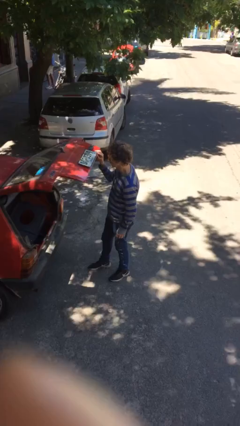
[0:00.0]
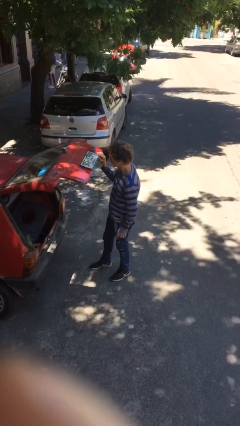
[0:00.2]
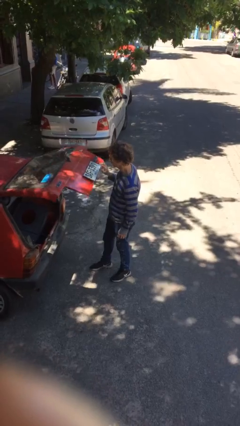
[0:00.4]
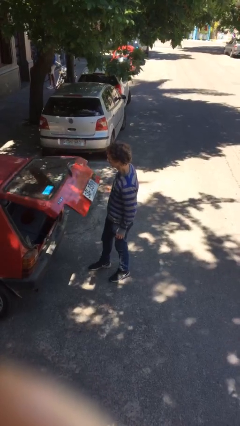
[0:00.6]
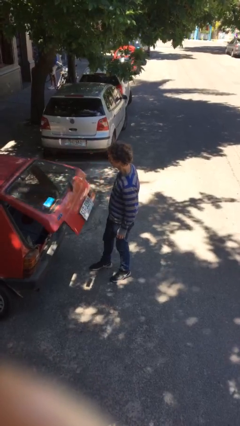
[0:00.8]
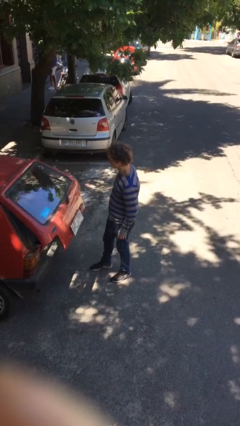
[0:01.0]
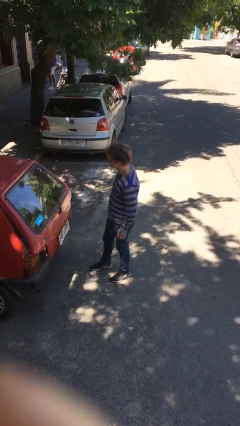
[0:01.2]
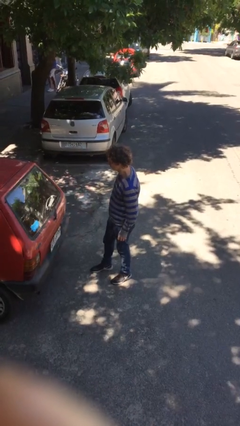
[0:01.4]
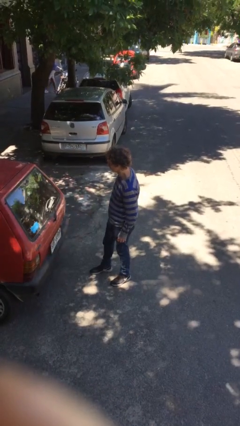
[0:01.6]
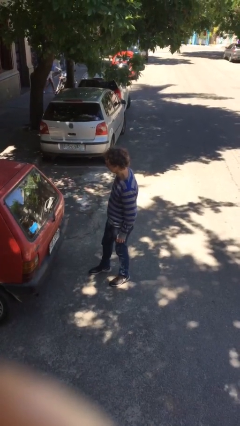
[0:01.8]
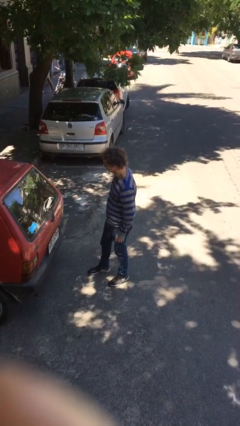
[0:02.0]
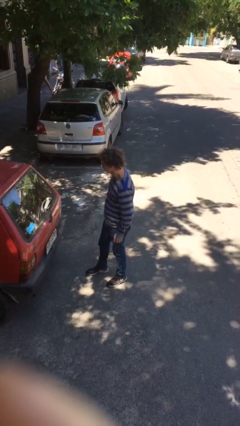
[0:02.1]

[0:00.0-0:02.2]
person closes car trunk

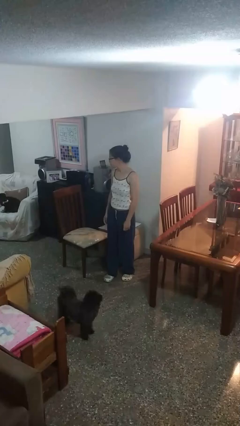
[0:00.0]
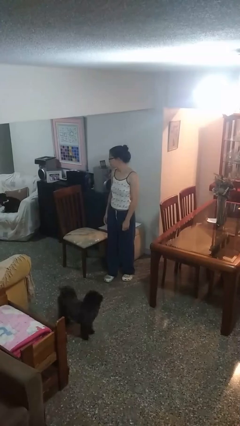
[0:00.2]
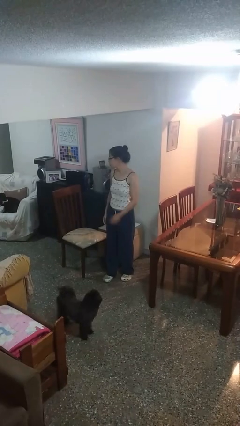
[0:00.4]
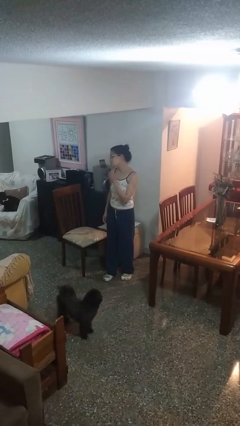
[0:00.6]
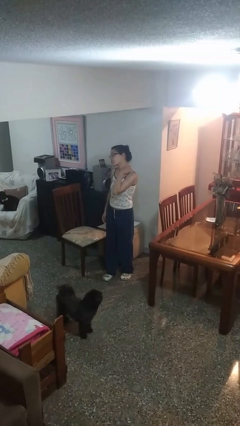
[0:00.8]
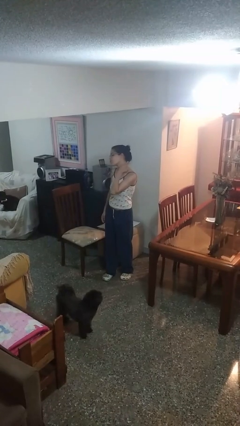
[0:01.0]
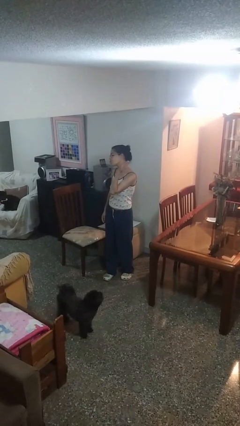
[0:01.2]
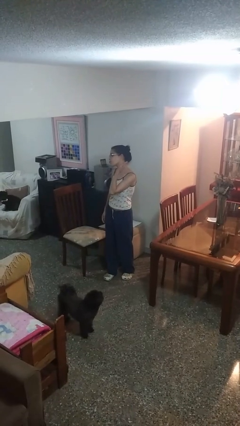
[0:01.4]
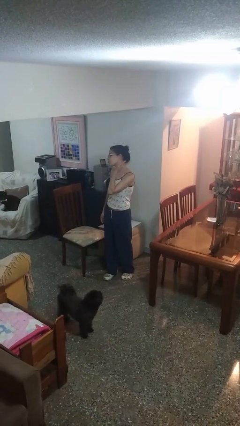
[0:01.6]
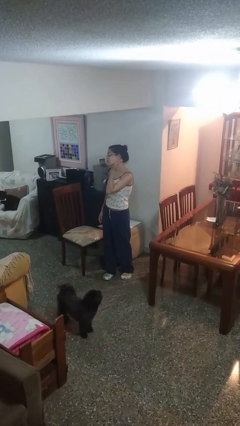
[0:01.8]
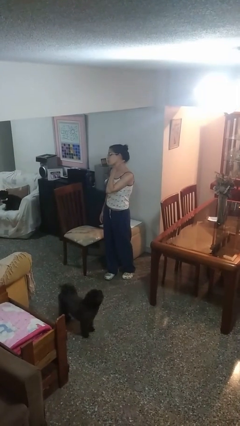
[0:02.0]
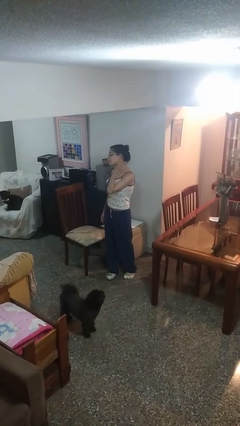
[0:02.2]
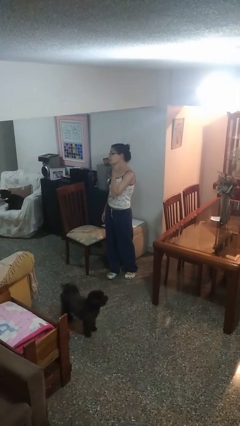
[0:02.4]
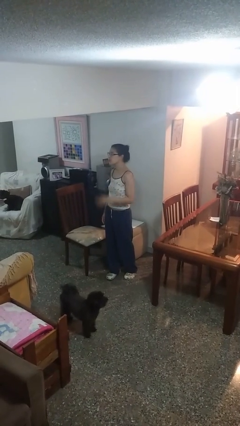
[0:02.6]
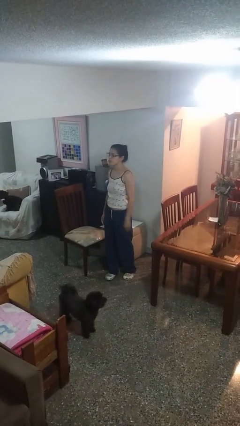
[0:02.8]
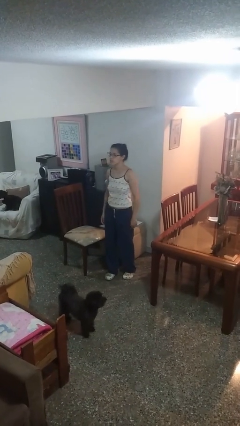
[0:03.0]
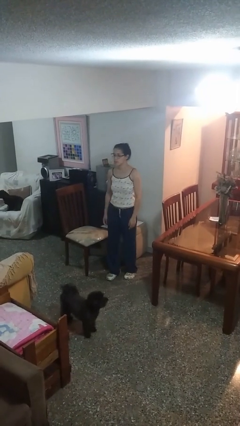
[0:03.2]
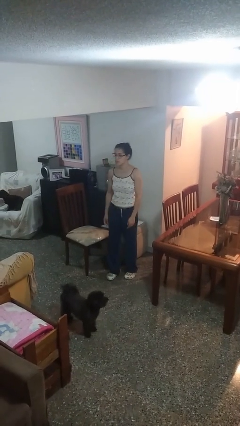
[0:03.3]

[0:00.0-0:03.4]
person gestures cut

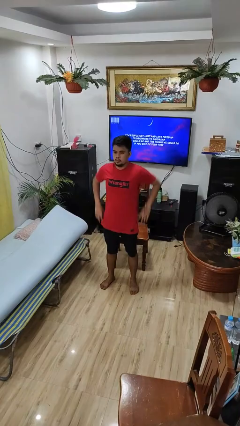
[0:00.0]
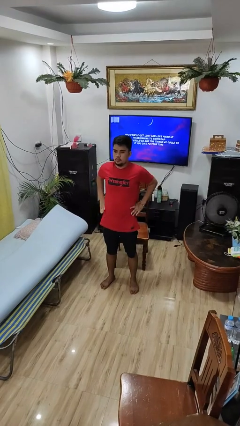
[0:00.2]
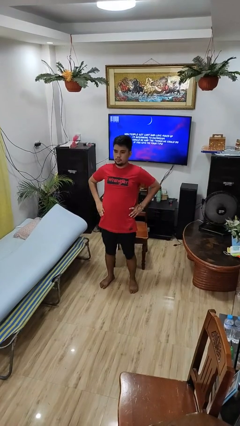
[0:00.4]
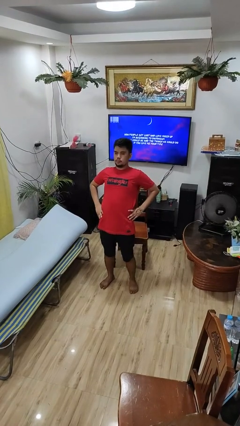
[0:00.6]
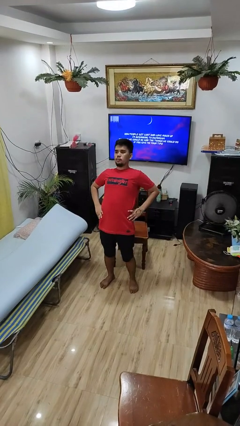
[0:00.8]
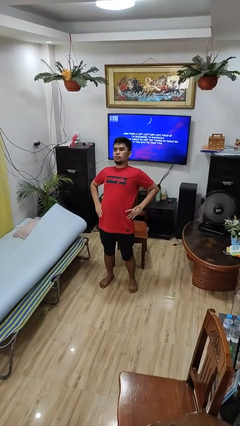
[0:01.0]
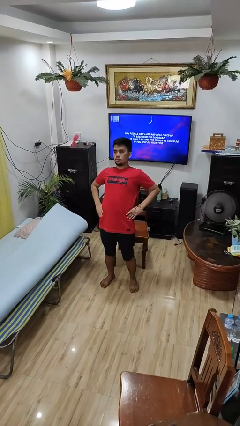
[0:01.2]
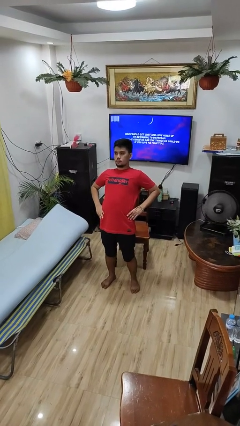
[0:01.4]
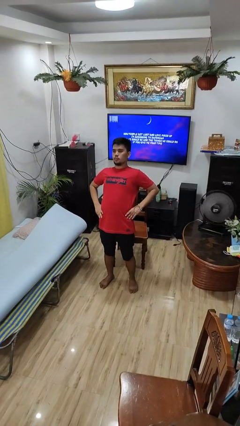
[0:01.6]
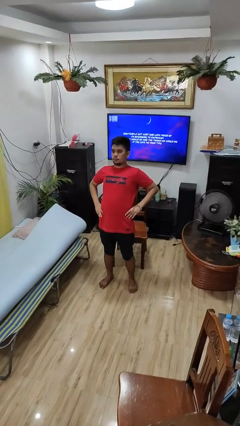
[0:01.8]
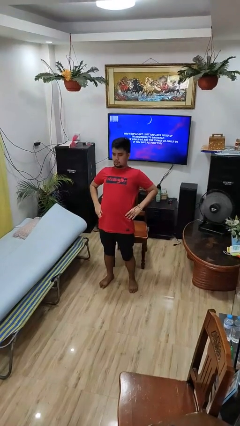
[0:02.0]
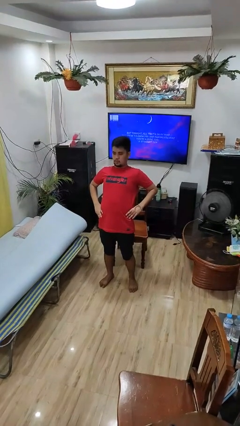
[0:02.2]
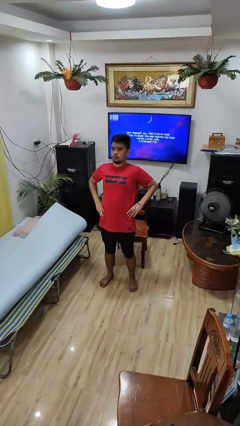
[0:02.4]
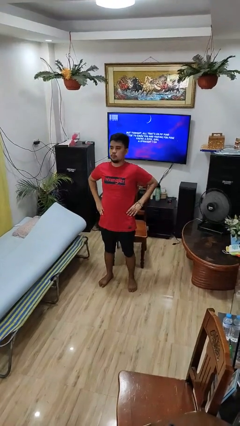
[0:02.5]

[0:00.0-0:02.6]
person stretches back

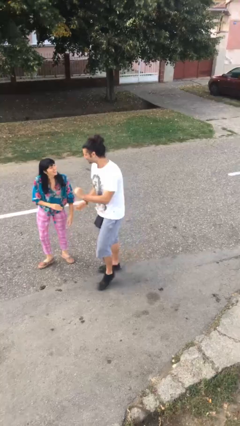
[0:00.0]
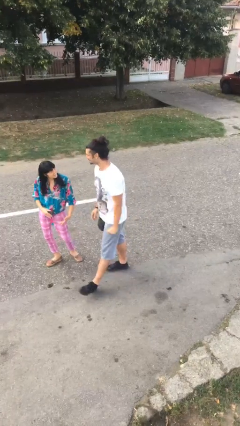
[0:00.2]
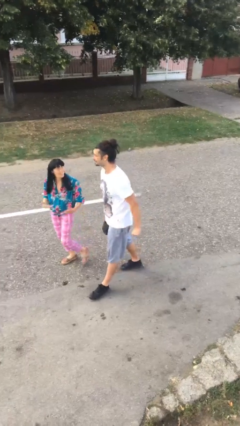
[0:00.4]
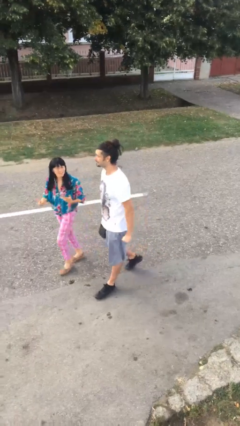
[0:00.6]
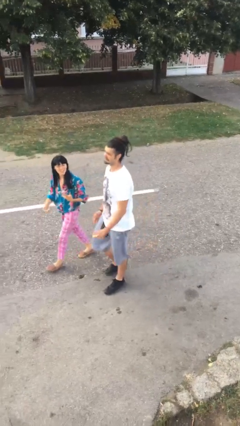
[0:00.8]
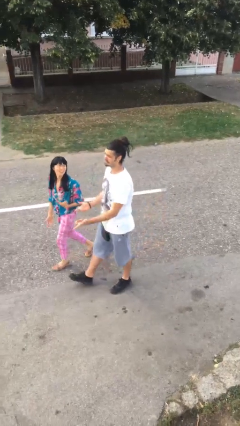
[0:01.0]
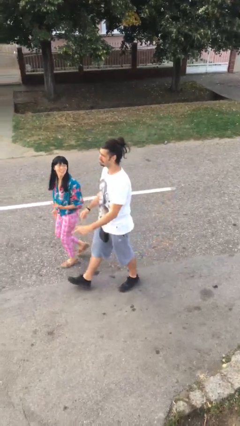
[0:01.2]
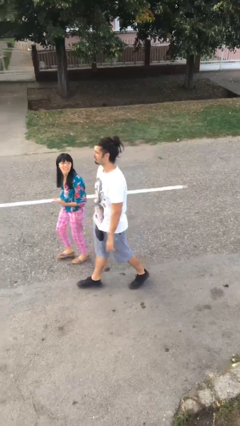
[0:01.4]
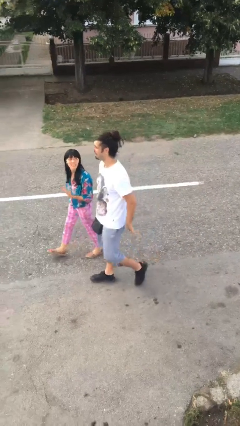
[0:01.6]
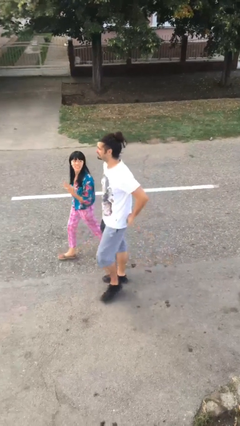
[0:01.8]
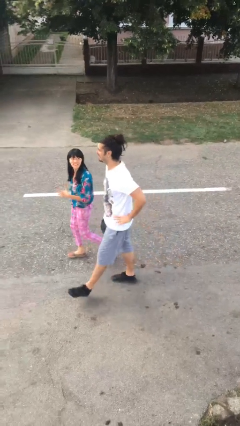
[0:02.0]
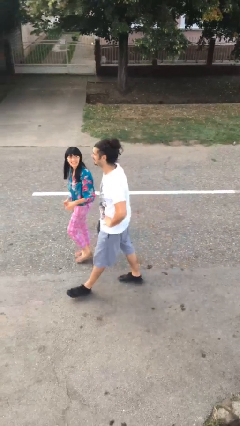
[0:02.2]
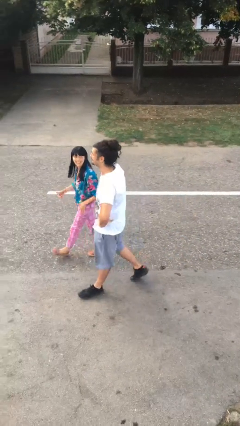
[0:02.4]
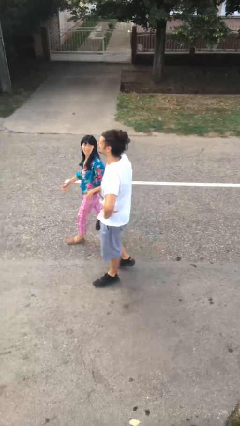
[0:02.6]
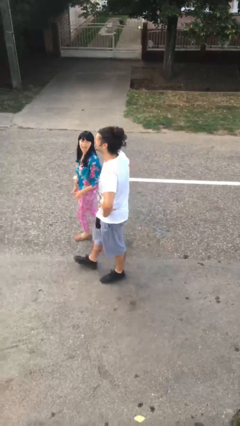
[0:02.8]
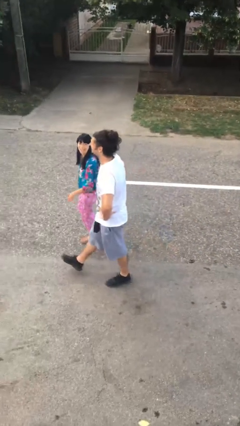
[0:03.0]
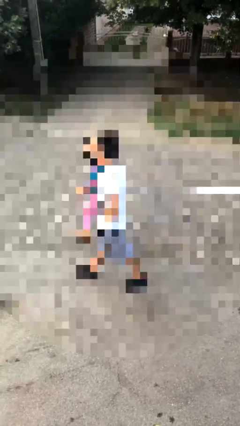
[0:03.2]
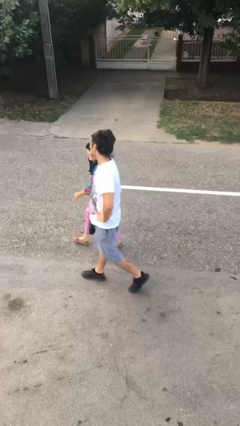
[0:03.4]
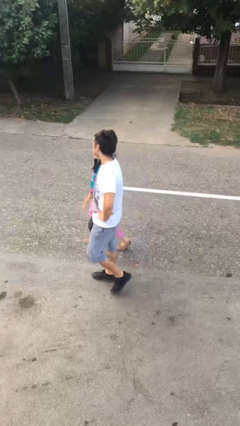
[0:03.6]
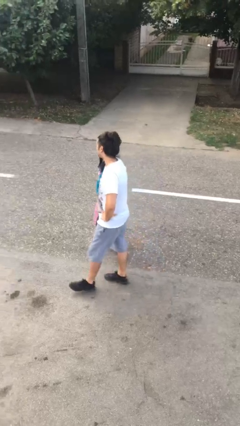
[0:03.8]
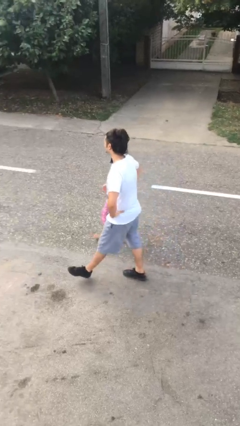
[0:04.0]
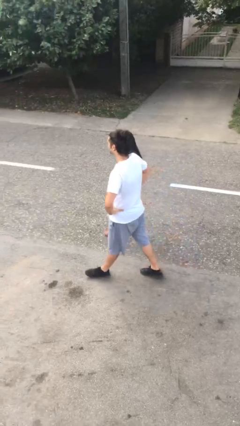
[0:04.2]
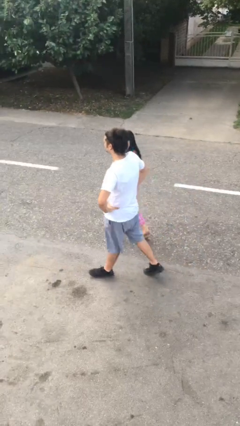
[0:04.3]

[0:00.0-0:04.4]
person talks to person

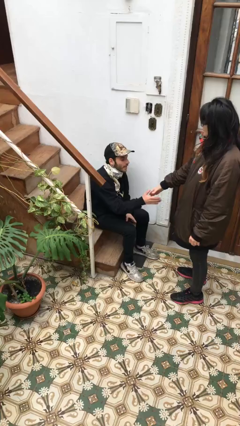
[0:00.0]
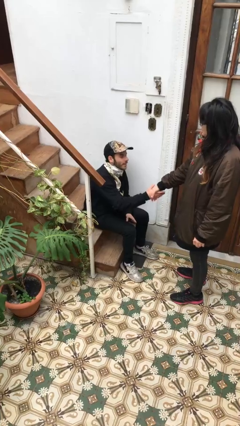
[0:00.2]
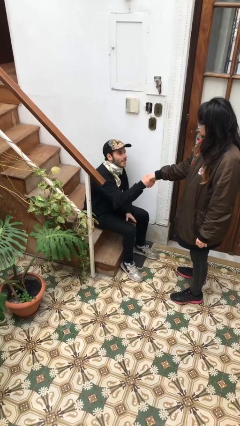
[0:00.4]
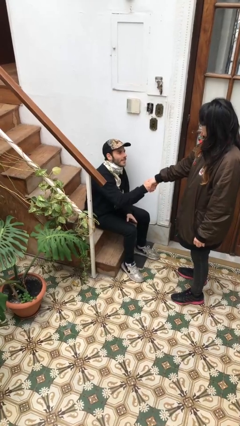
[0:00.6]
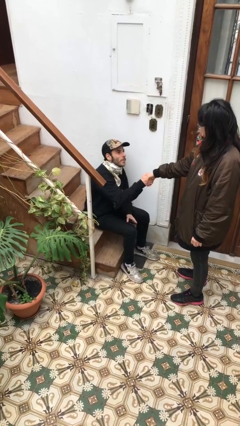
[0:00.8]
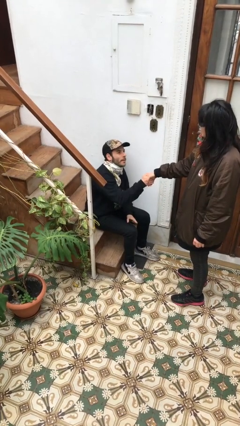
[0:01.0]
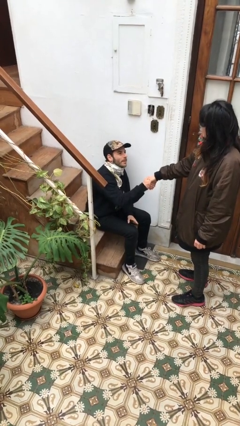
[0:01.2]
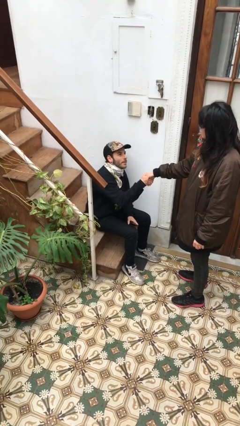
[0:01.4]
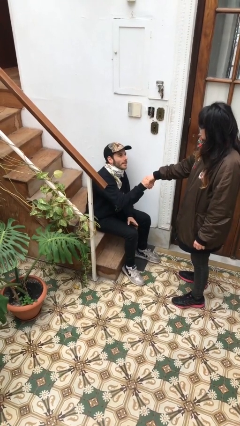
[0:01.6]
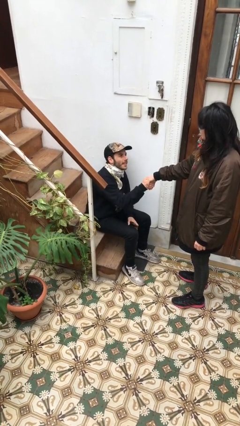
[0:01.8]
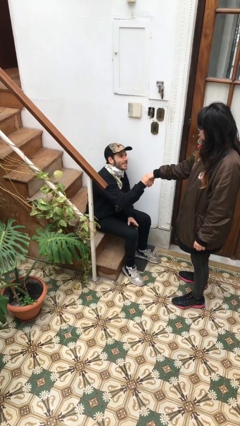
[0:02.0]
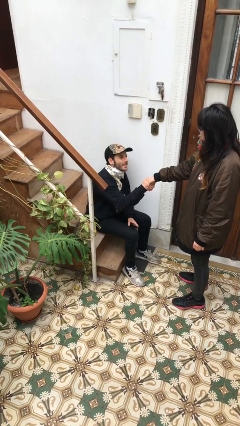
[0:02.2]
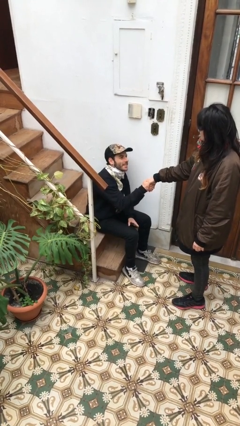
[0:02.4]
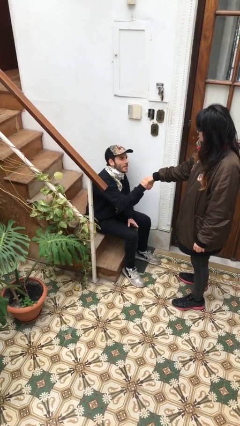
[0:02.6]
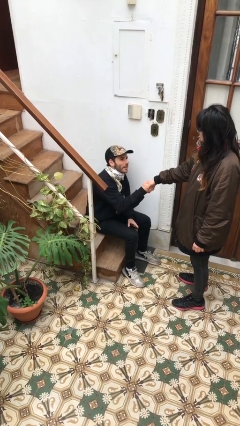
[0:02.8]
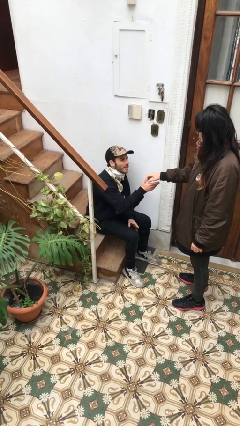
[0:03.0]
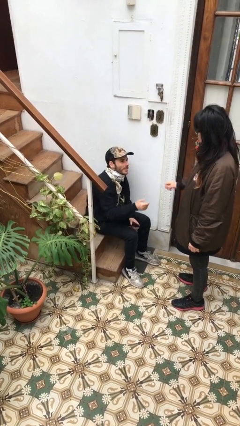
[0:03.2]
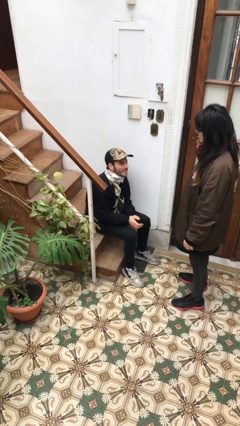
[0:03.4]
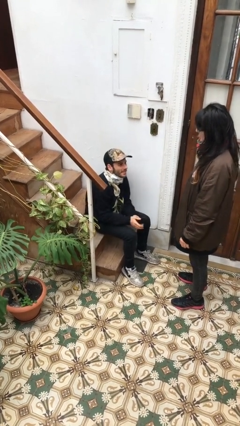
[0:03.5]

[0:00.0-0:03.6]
person shakes hand

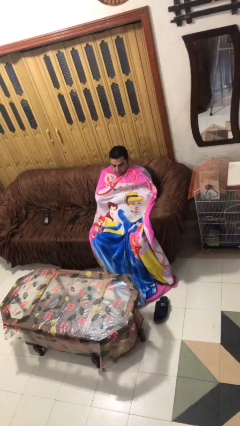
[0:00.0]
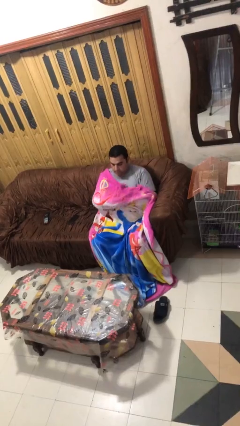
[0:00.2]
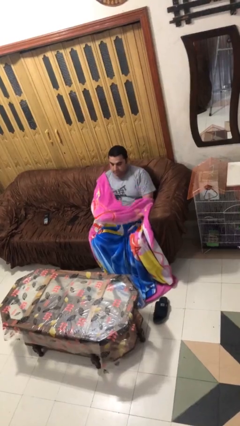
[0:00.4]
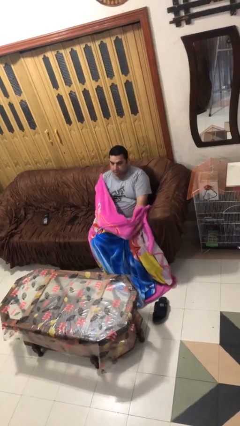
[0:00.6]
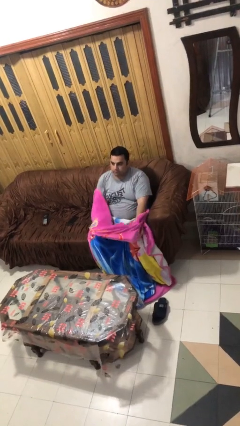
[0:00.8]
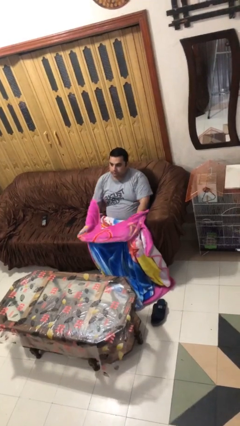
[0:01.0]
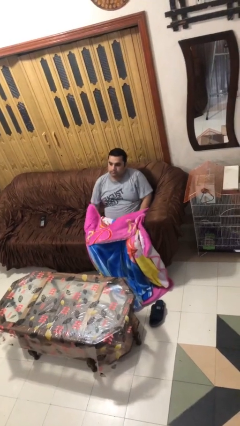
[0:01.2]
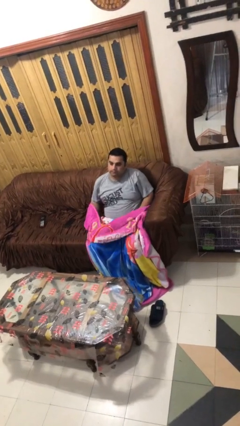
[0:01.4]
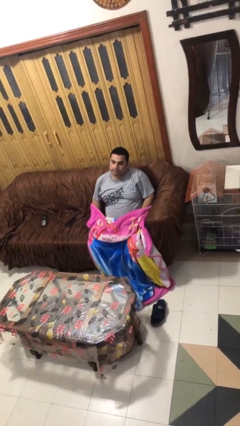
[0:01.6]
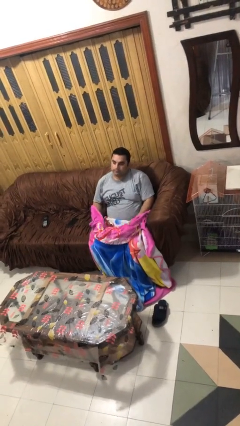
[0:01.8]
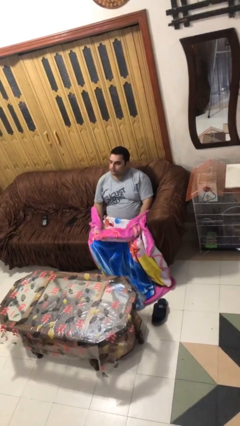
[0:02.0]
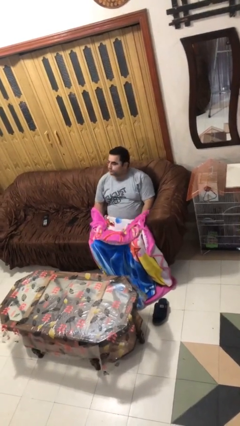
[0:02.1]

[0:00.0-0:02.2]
person uncovers with blanket
